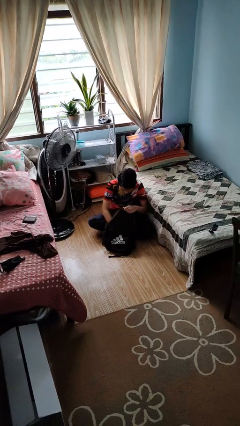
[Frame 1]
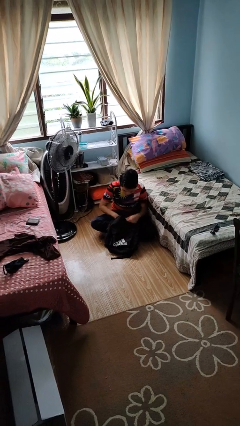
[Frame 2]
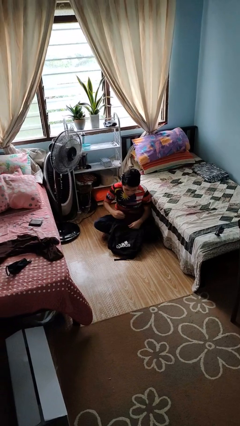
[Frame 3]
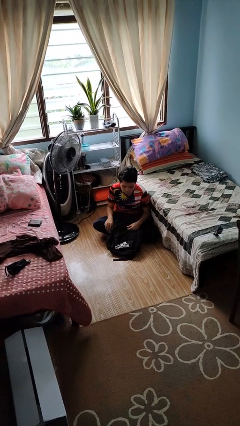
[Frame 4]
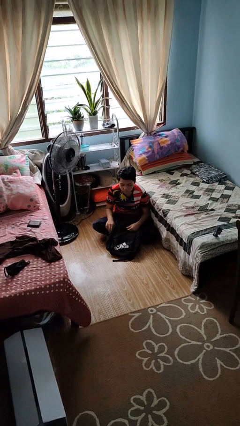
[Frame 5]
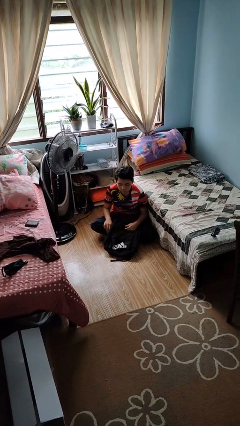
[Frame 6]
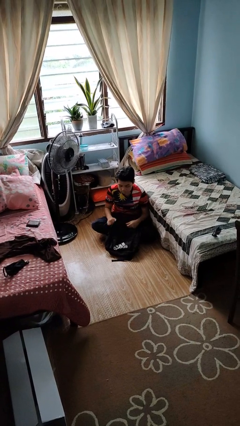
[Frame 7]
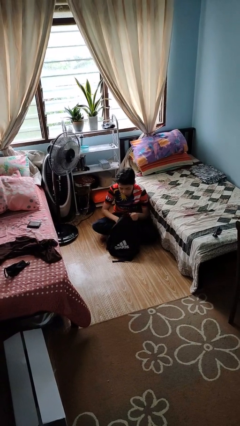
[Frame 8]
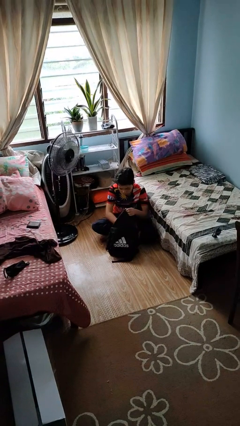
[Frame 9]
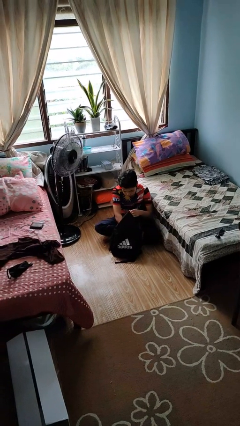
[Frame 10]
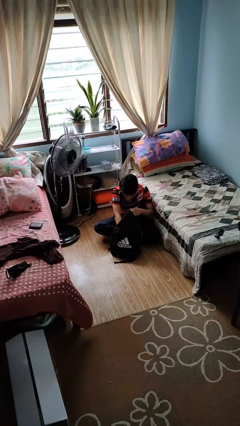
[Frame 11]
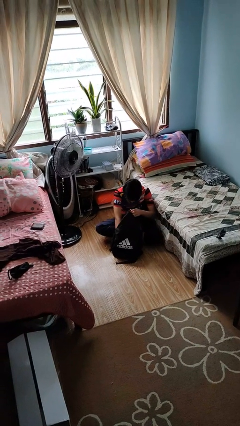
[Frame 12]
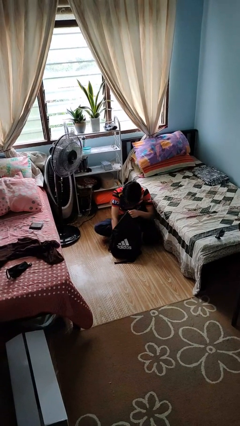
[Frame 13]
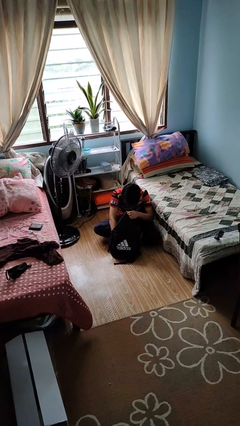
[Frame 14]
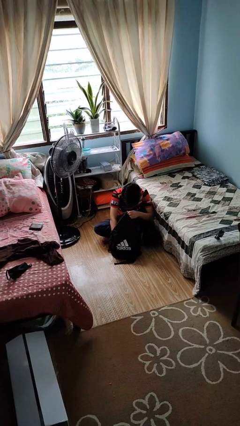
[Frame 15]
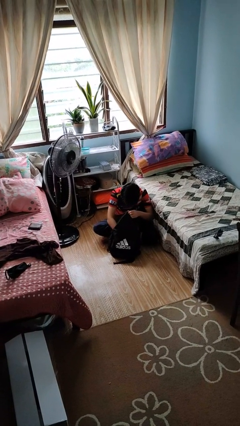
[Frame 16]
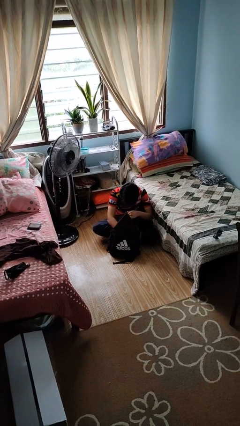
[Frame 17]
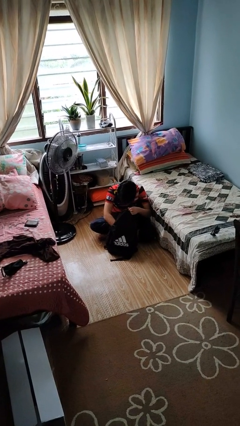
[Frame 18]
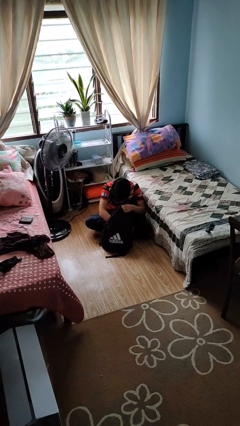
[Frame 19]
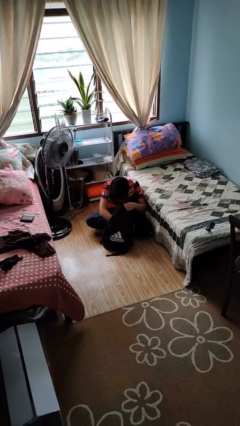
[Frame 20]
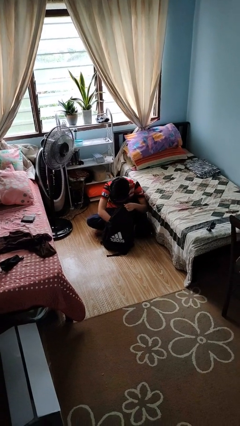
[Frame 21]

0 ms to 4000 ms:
person searches in backpack

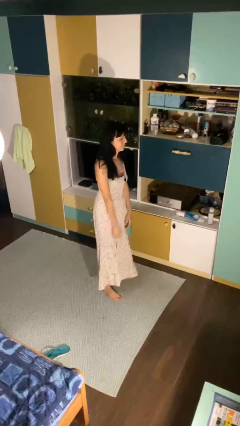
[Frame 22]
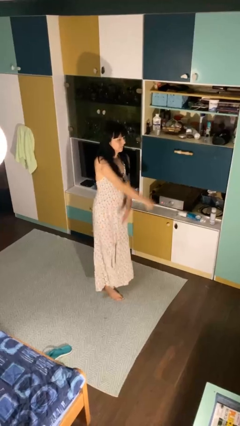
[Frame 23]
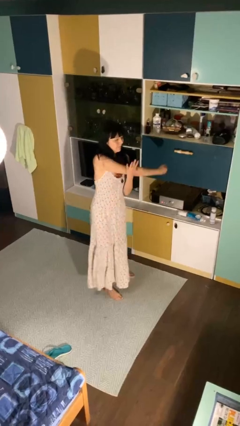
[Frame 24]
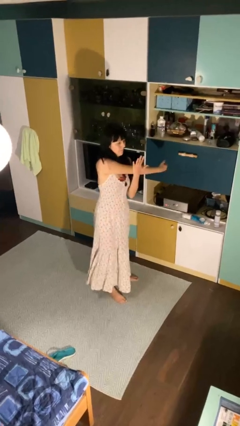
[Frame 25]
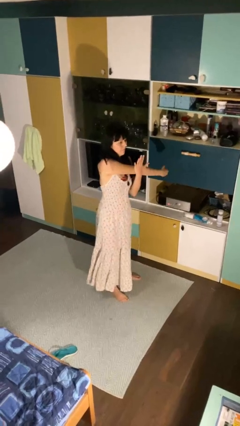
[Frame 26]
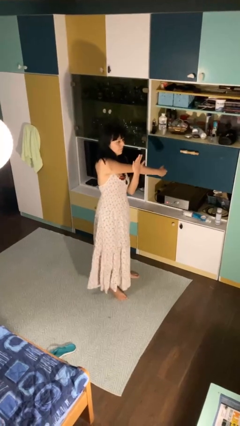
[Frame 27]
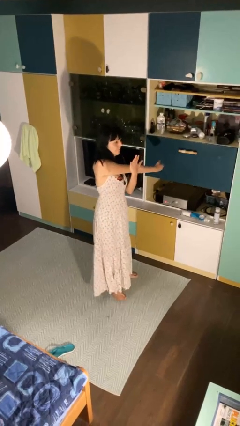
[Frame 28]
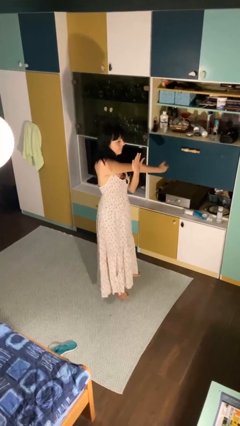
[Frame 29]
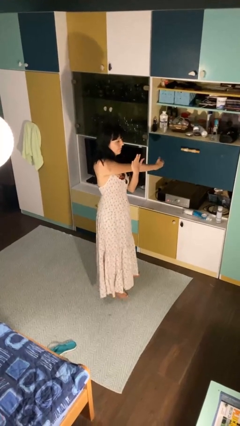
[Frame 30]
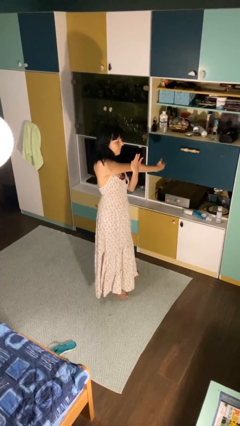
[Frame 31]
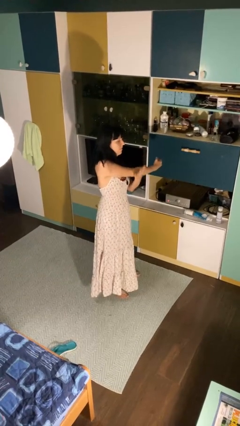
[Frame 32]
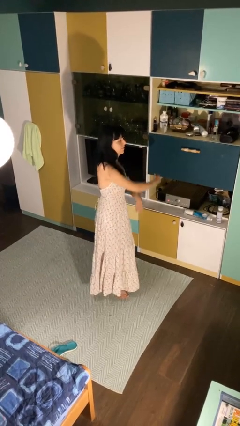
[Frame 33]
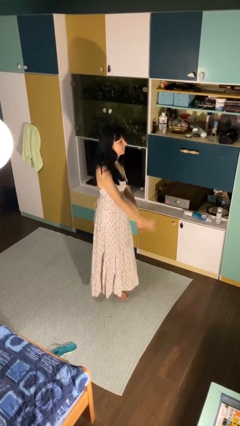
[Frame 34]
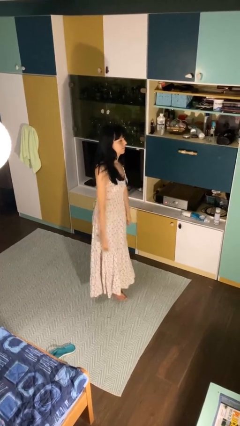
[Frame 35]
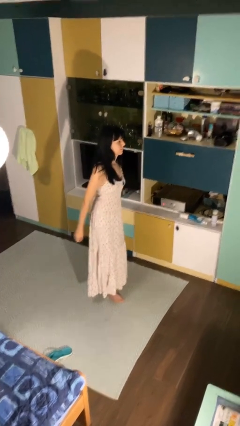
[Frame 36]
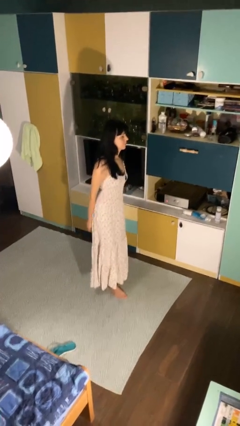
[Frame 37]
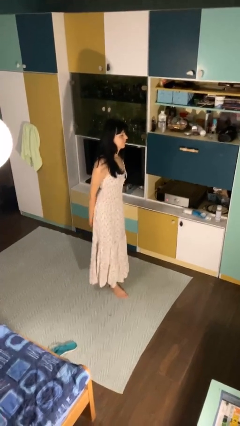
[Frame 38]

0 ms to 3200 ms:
person stretches arms to side

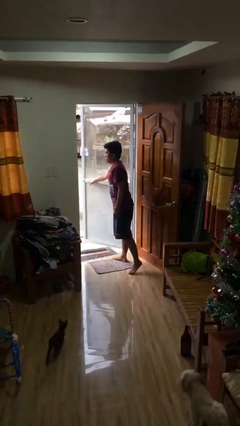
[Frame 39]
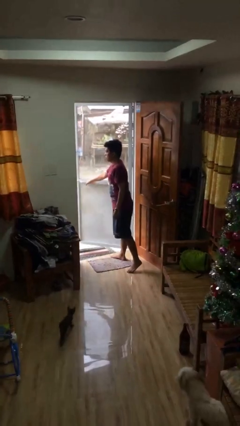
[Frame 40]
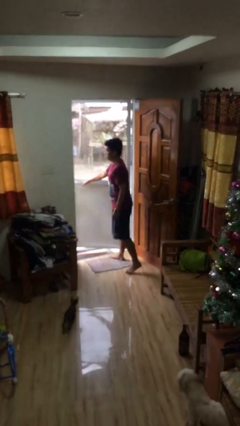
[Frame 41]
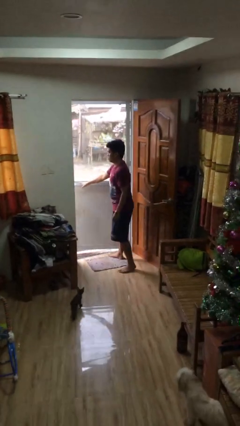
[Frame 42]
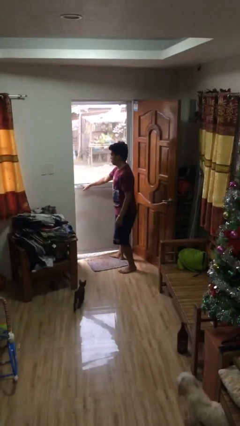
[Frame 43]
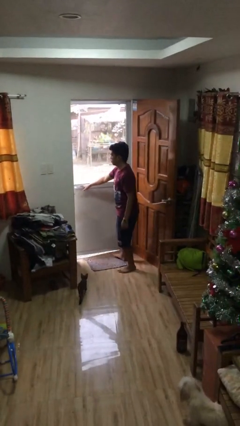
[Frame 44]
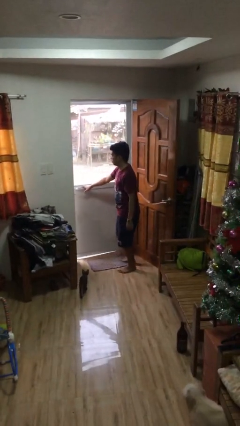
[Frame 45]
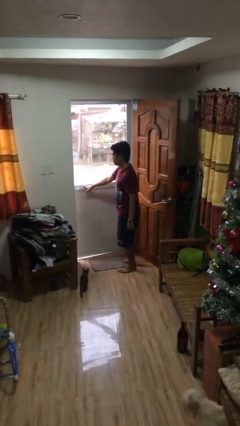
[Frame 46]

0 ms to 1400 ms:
person closes facility door

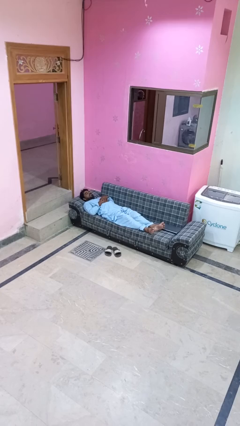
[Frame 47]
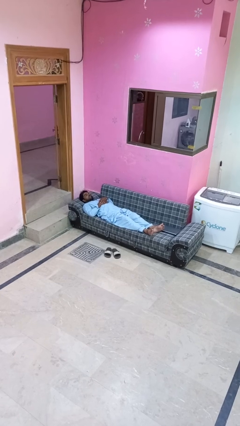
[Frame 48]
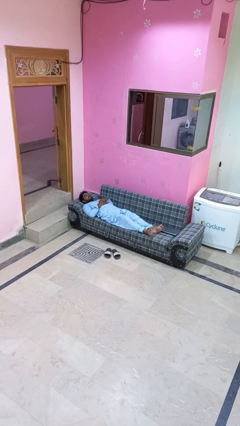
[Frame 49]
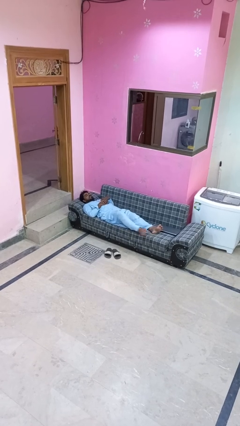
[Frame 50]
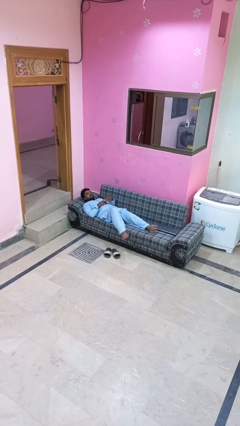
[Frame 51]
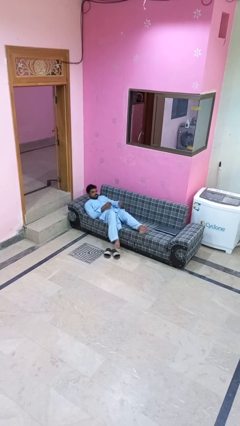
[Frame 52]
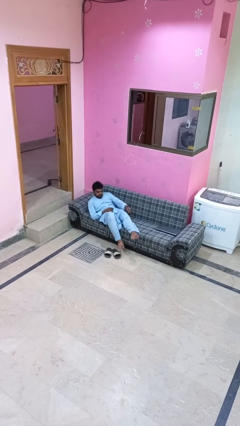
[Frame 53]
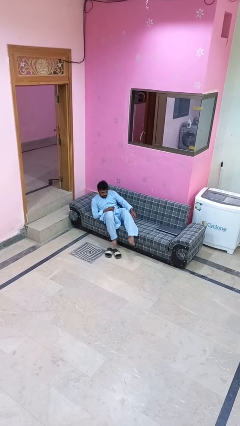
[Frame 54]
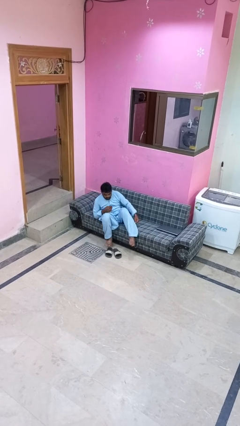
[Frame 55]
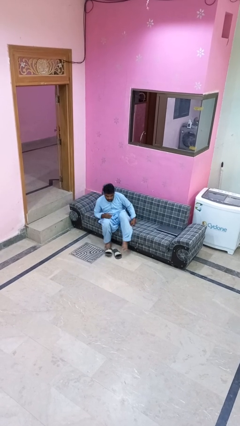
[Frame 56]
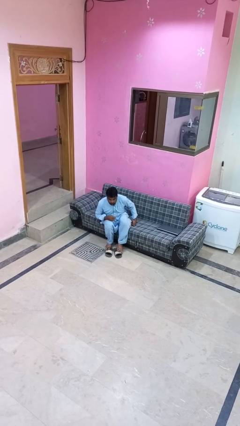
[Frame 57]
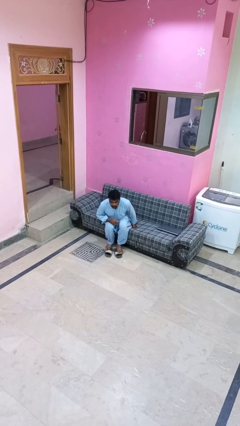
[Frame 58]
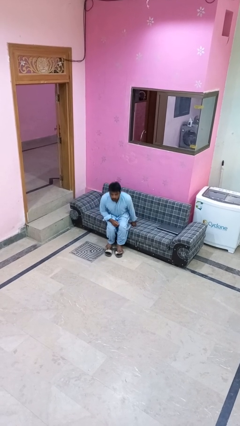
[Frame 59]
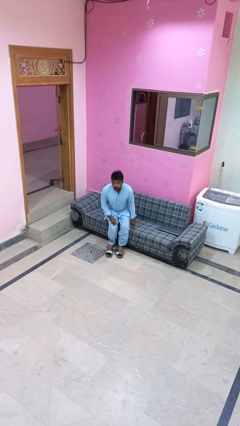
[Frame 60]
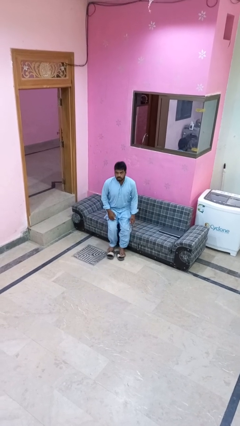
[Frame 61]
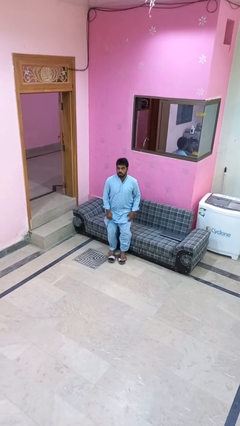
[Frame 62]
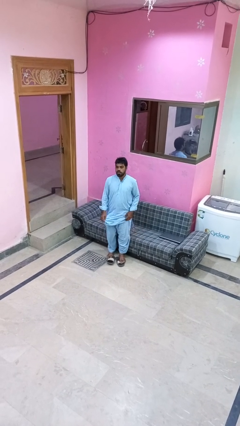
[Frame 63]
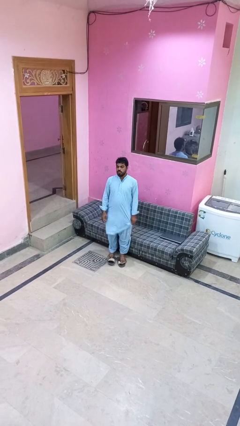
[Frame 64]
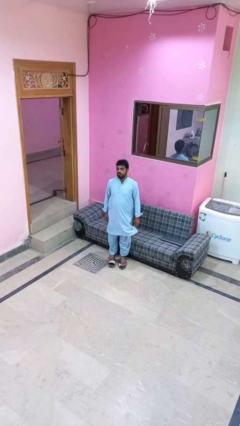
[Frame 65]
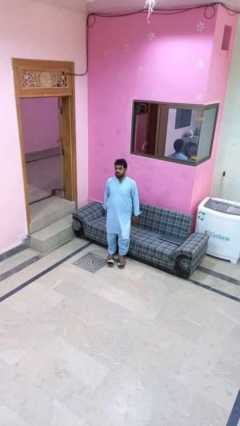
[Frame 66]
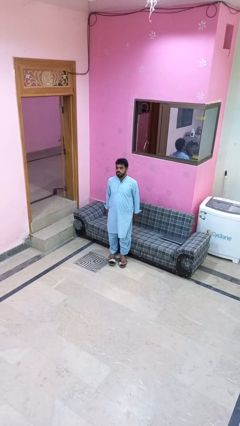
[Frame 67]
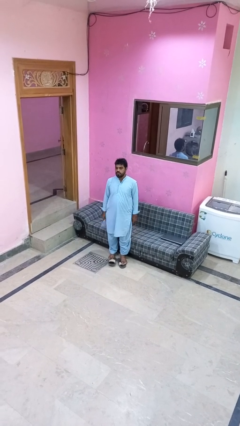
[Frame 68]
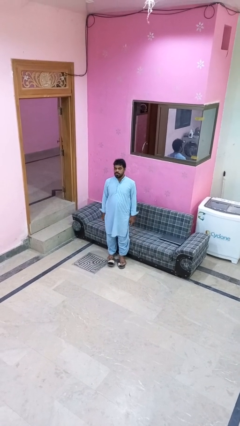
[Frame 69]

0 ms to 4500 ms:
person stands up

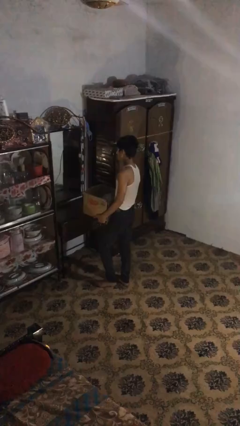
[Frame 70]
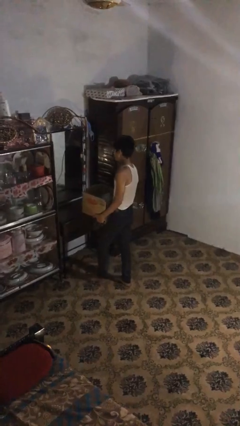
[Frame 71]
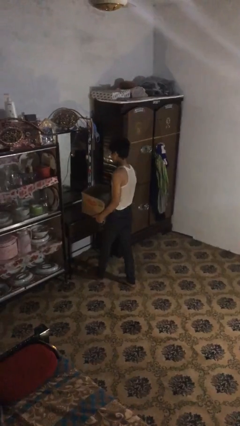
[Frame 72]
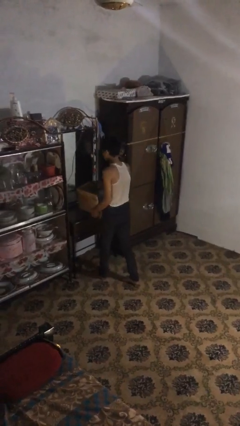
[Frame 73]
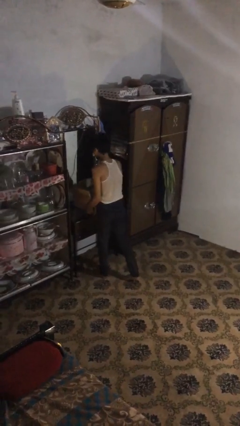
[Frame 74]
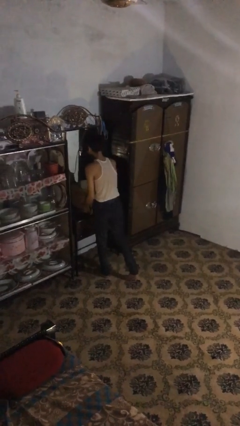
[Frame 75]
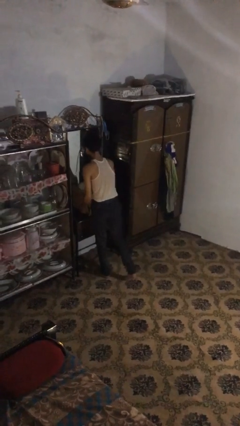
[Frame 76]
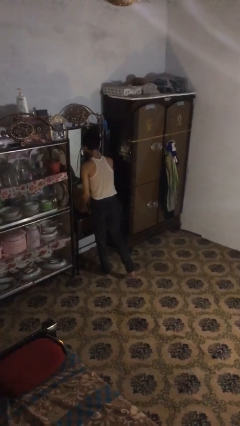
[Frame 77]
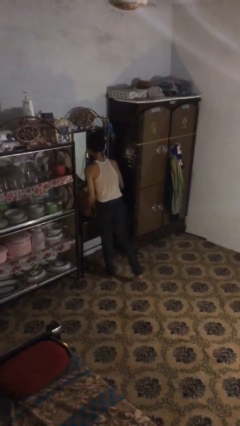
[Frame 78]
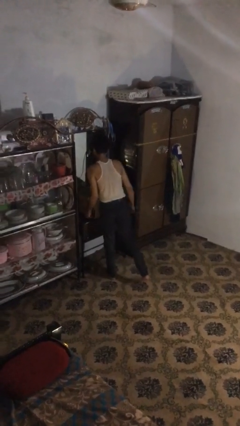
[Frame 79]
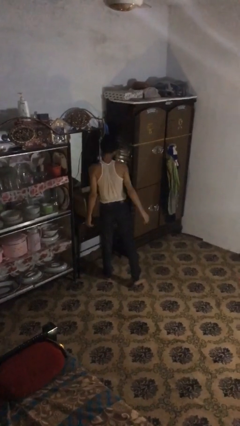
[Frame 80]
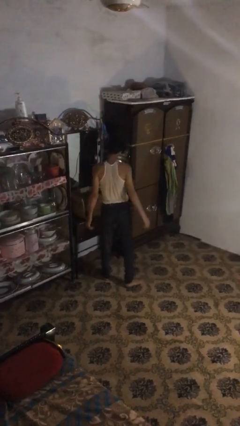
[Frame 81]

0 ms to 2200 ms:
person puts down object on table

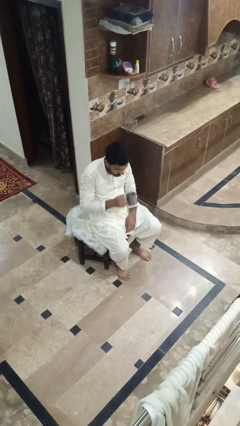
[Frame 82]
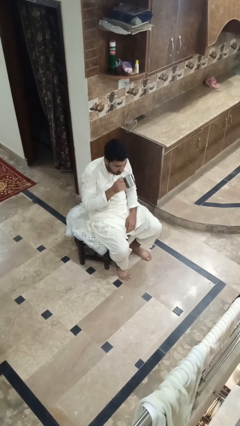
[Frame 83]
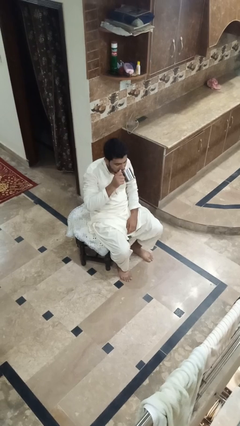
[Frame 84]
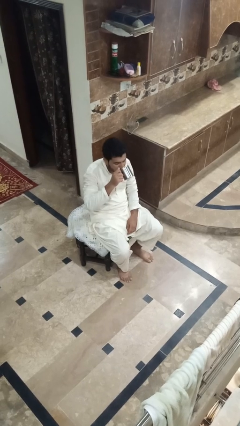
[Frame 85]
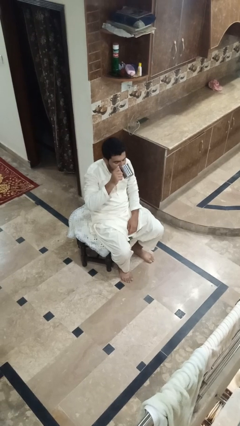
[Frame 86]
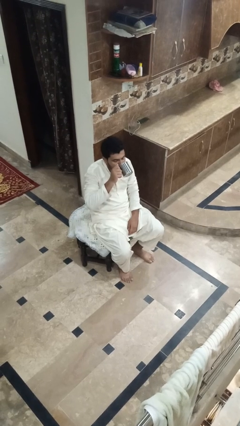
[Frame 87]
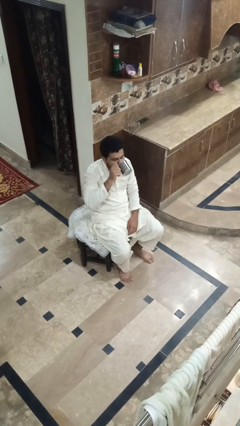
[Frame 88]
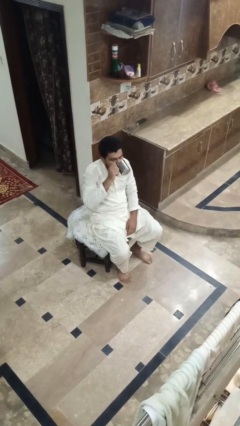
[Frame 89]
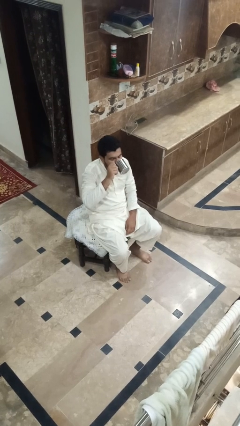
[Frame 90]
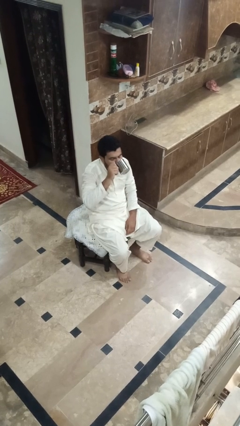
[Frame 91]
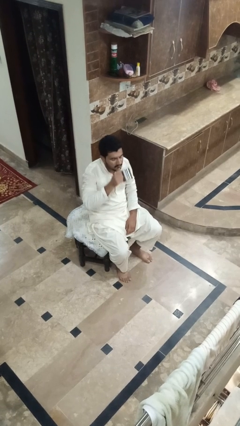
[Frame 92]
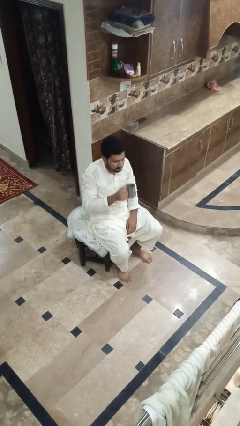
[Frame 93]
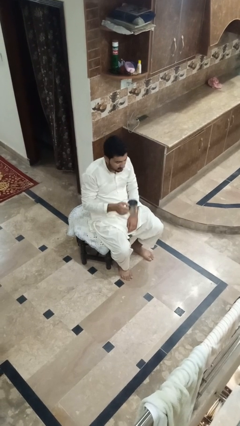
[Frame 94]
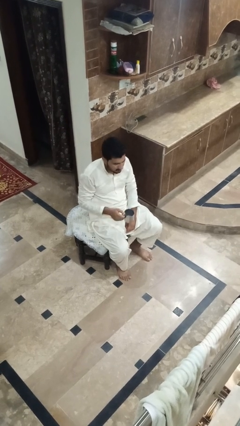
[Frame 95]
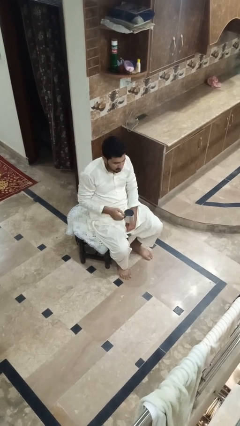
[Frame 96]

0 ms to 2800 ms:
person drinks from mug
